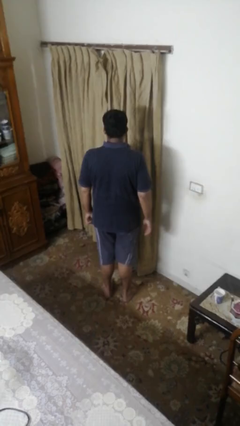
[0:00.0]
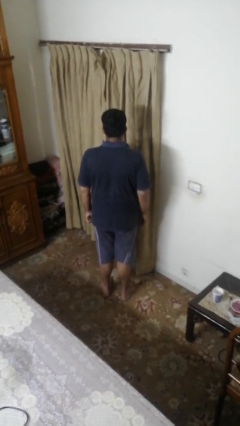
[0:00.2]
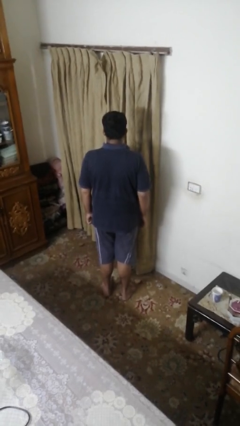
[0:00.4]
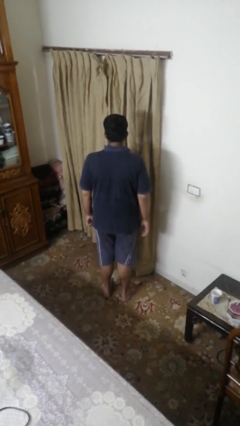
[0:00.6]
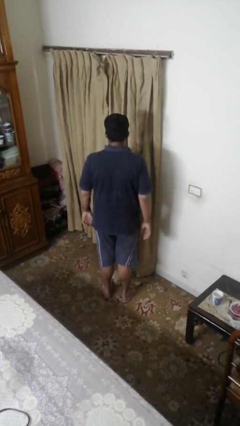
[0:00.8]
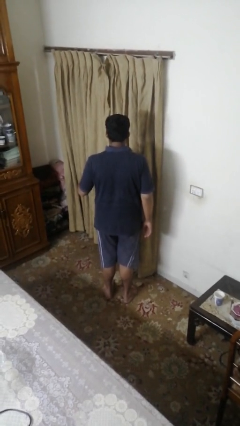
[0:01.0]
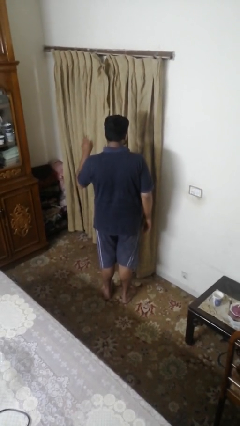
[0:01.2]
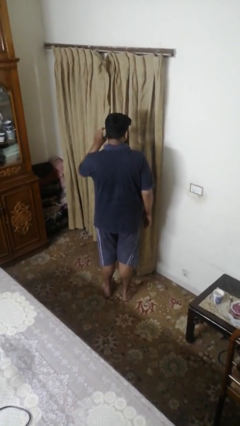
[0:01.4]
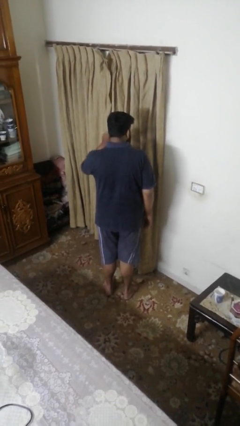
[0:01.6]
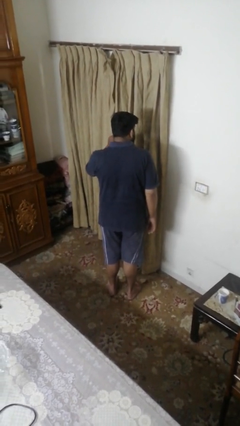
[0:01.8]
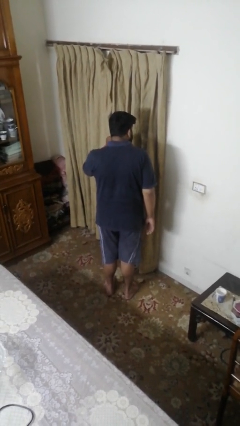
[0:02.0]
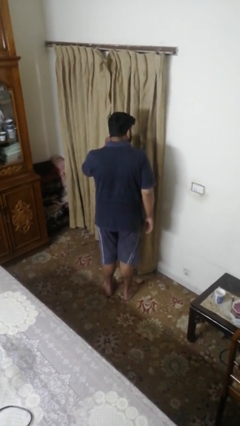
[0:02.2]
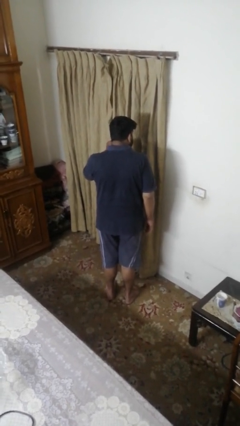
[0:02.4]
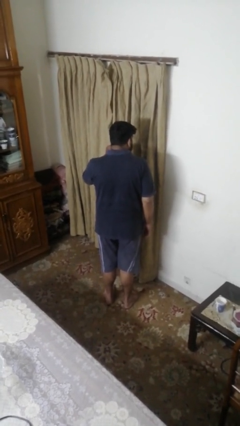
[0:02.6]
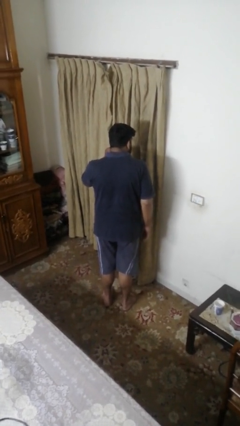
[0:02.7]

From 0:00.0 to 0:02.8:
person gestures listen closely

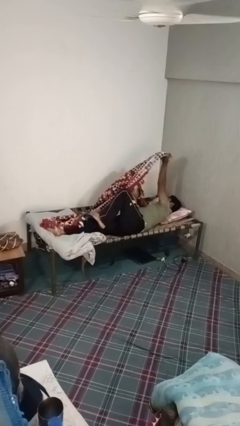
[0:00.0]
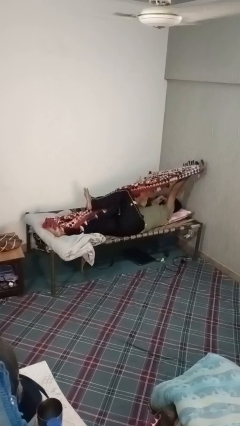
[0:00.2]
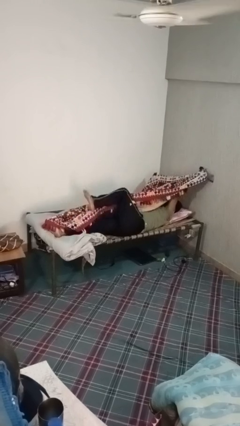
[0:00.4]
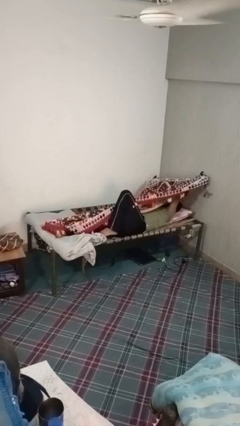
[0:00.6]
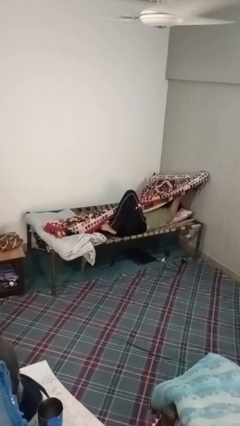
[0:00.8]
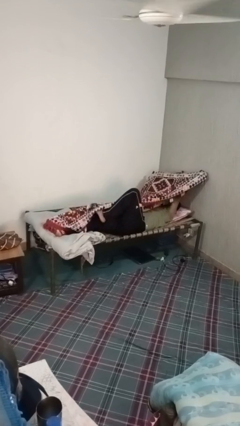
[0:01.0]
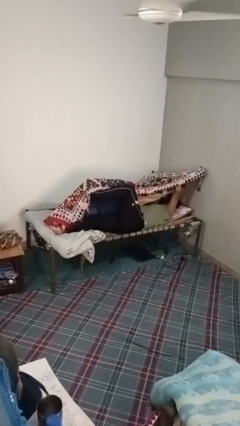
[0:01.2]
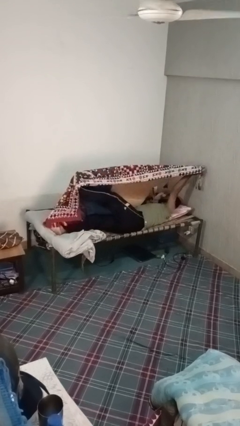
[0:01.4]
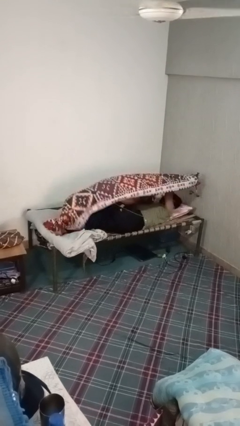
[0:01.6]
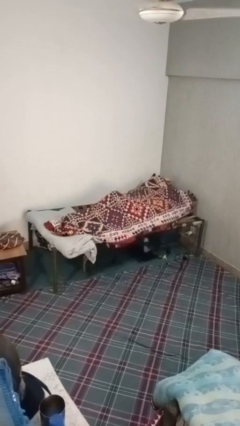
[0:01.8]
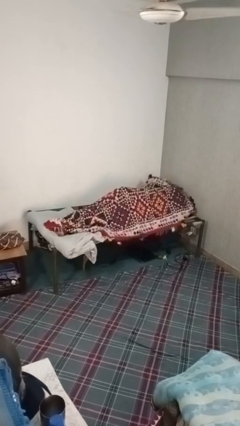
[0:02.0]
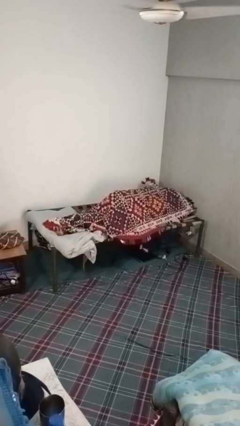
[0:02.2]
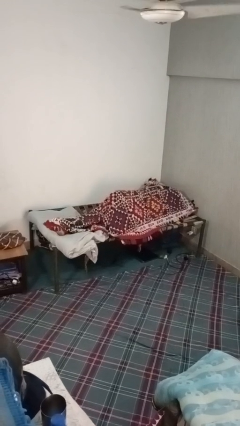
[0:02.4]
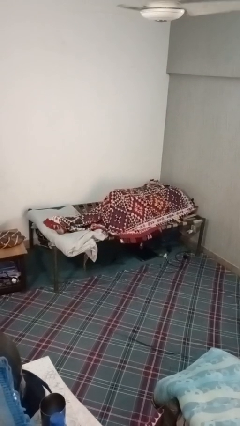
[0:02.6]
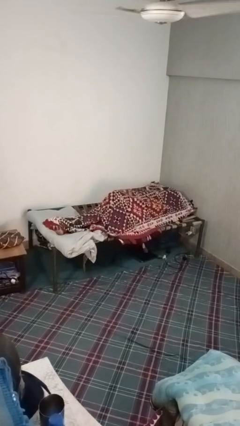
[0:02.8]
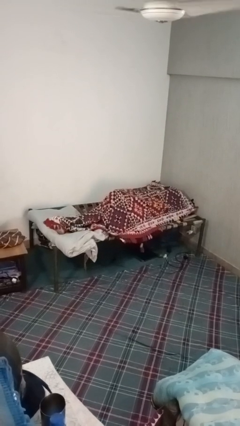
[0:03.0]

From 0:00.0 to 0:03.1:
person covers with blanket

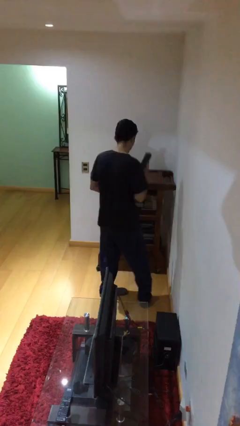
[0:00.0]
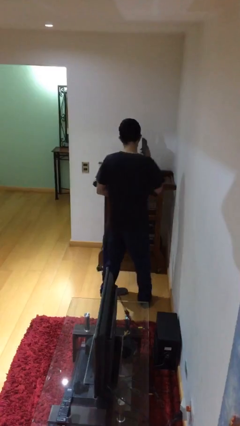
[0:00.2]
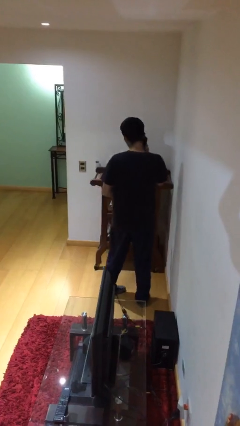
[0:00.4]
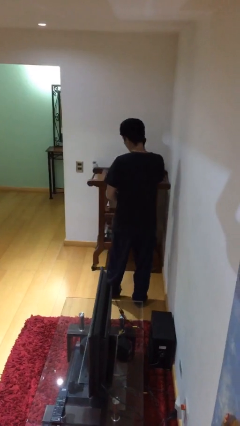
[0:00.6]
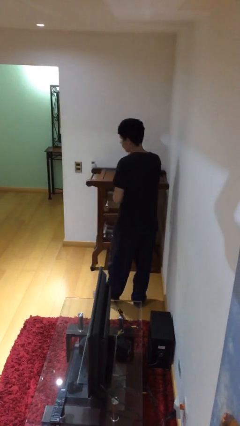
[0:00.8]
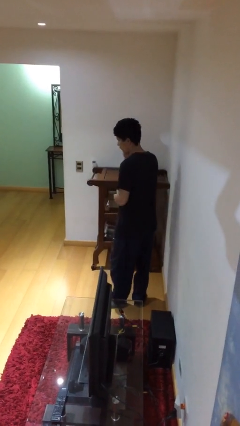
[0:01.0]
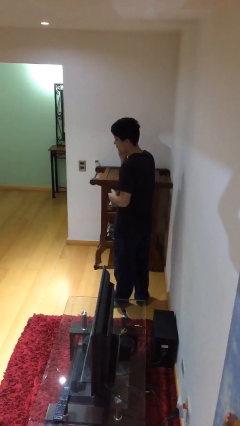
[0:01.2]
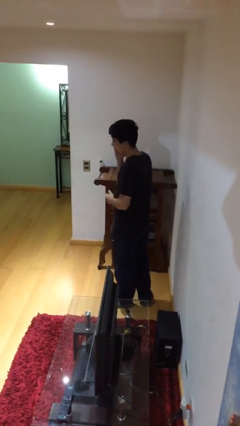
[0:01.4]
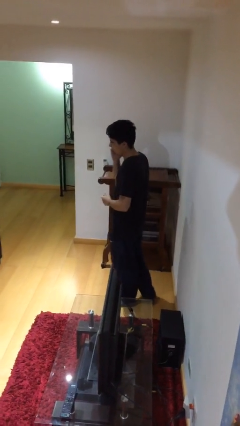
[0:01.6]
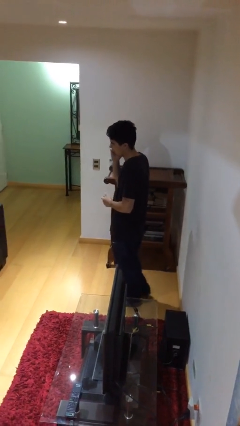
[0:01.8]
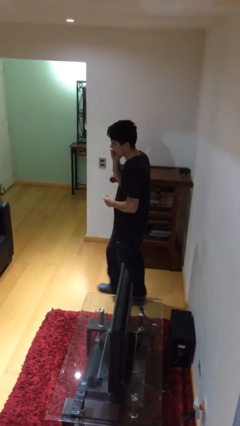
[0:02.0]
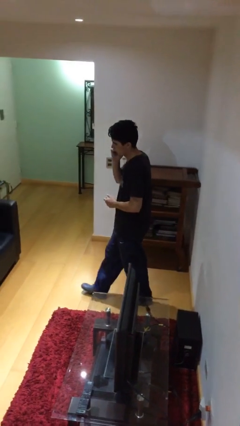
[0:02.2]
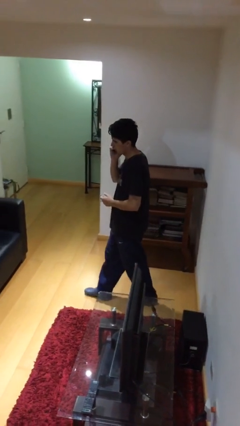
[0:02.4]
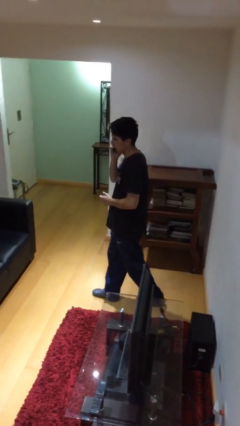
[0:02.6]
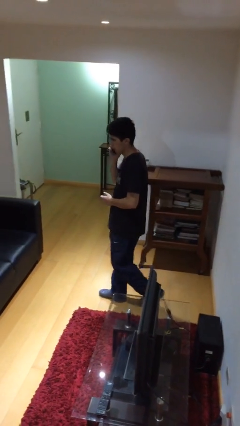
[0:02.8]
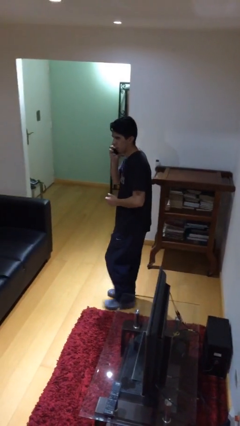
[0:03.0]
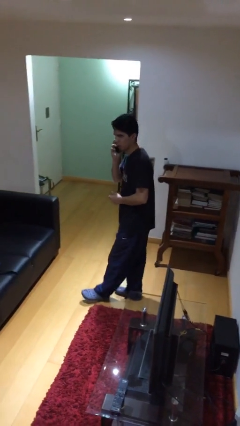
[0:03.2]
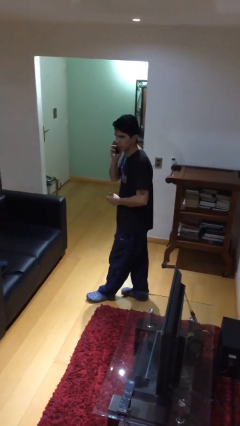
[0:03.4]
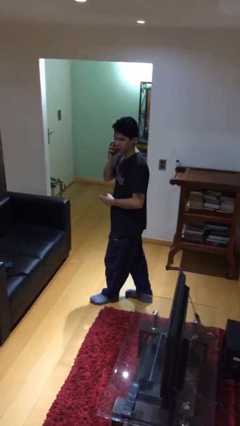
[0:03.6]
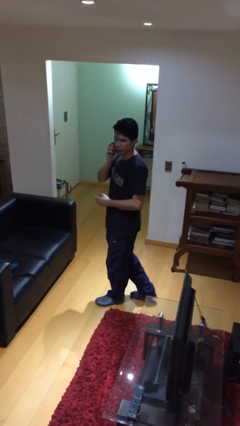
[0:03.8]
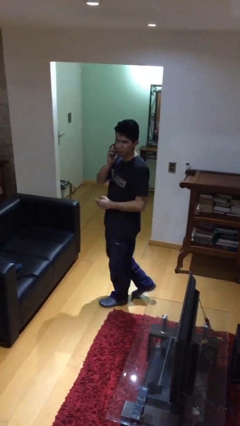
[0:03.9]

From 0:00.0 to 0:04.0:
person talks on phone

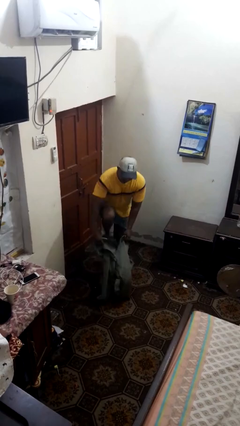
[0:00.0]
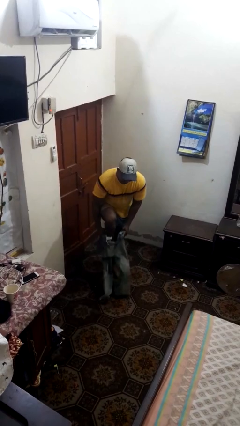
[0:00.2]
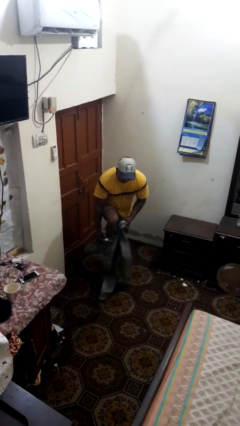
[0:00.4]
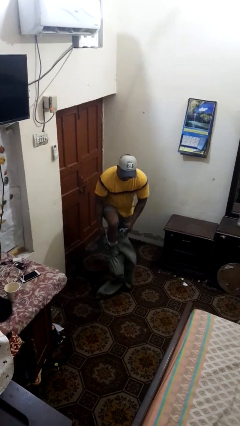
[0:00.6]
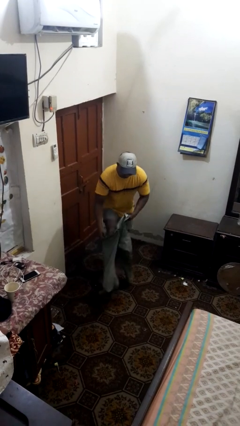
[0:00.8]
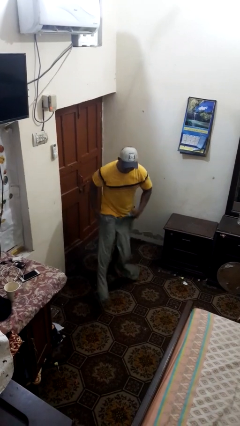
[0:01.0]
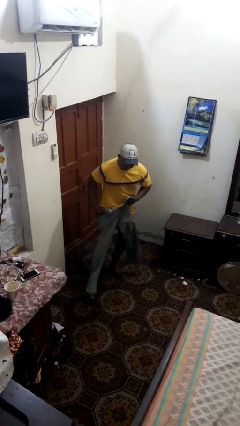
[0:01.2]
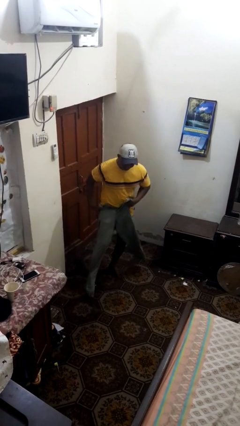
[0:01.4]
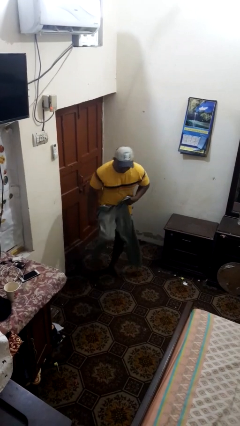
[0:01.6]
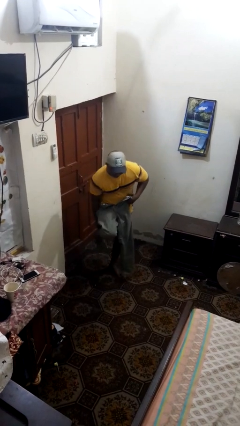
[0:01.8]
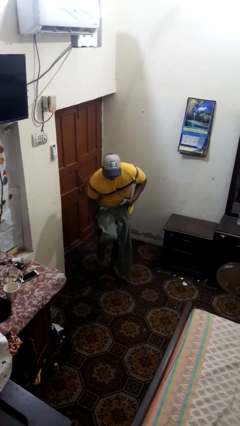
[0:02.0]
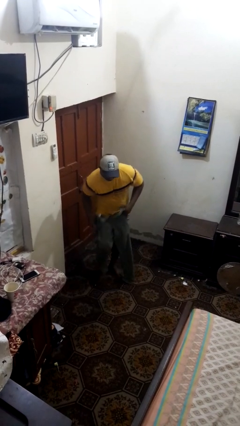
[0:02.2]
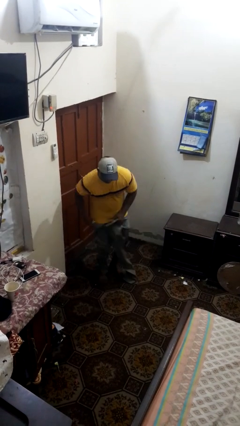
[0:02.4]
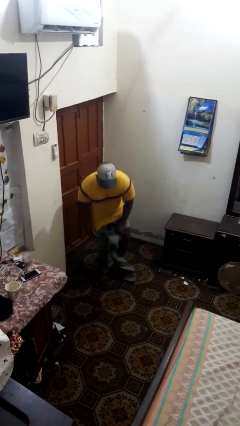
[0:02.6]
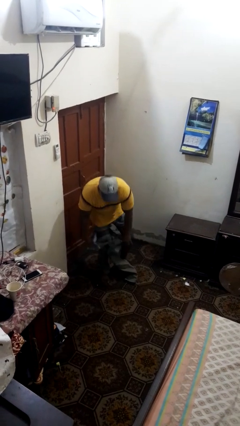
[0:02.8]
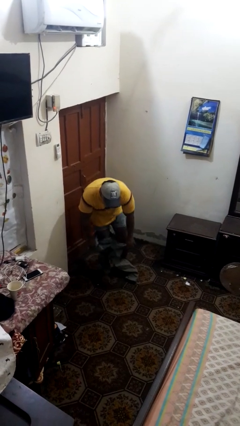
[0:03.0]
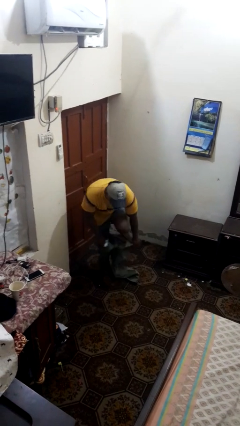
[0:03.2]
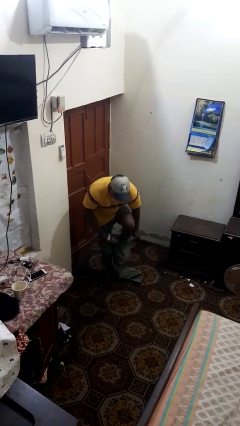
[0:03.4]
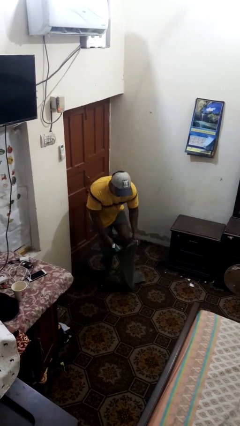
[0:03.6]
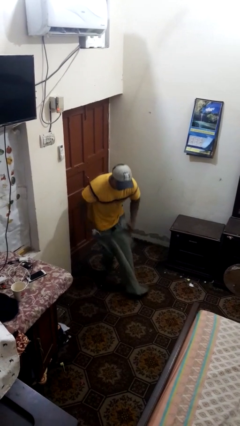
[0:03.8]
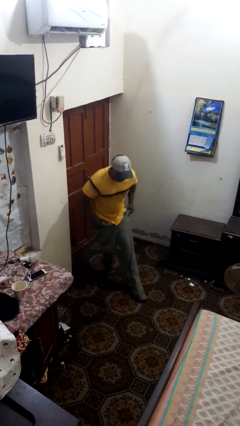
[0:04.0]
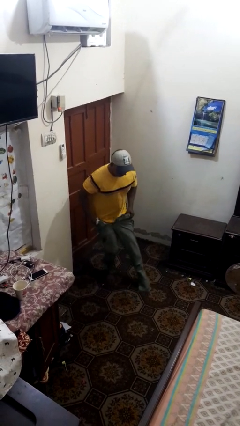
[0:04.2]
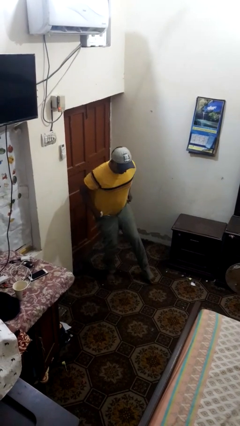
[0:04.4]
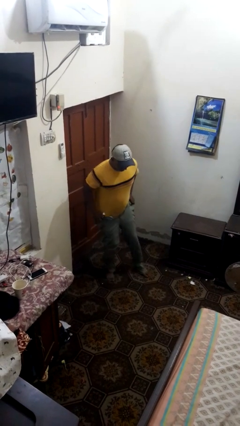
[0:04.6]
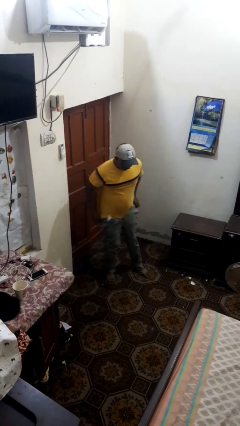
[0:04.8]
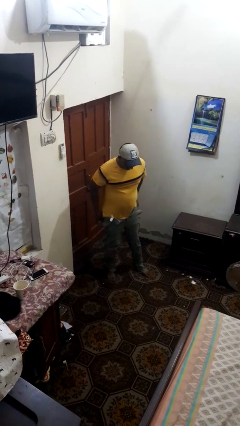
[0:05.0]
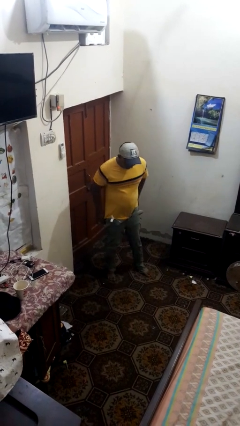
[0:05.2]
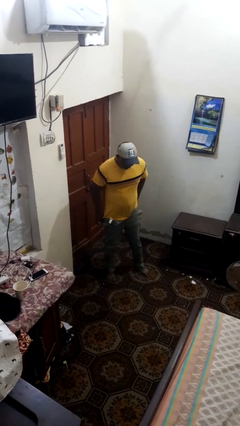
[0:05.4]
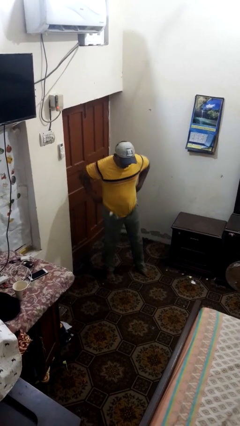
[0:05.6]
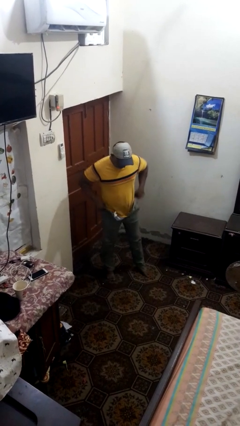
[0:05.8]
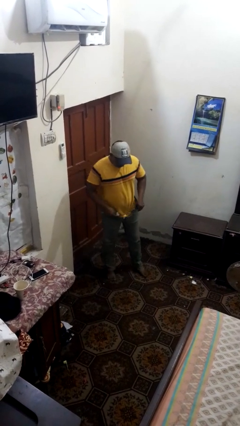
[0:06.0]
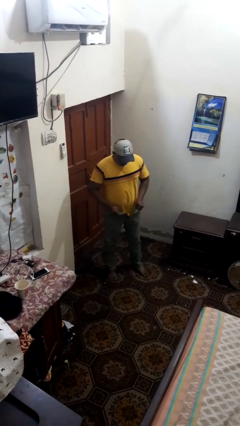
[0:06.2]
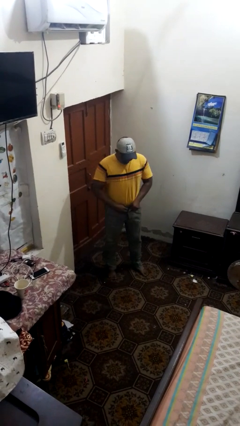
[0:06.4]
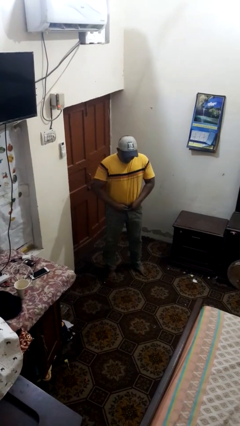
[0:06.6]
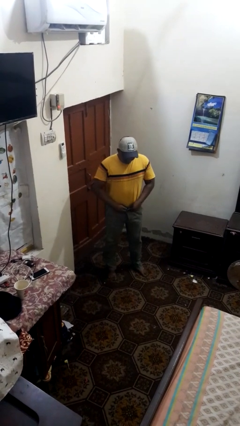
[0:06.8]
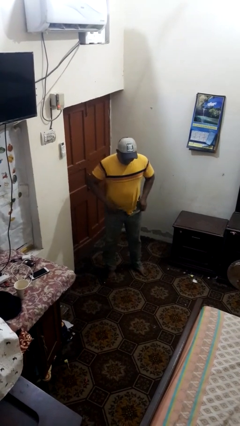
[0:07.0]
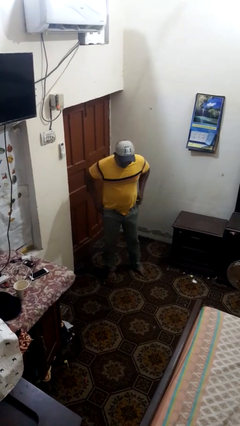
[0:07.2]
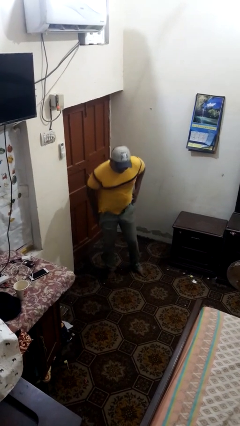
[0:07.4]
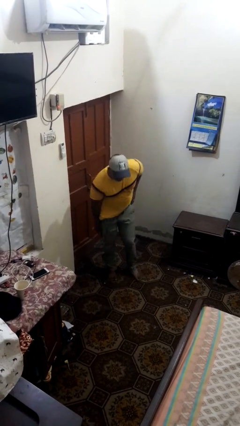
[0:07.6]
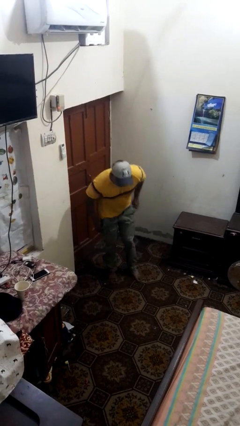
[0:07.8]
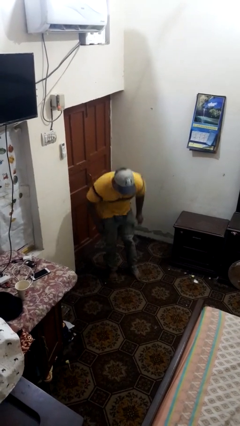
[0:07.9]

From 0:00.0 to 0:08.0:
person puts on pants
